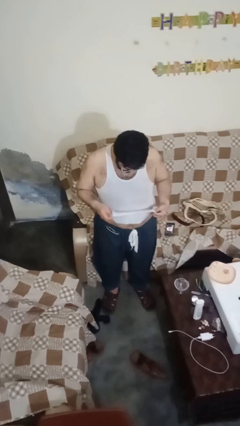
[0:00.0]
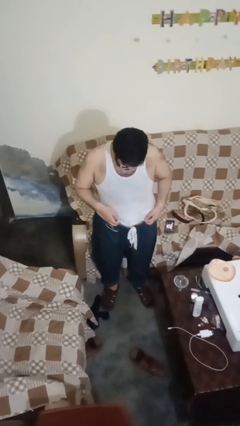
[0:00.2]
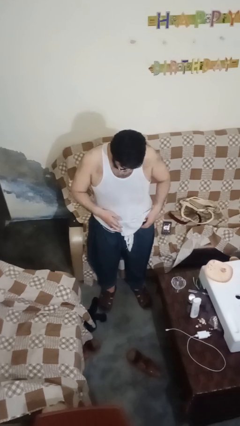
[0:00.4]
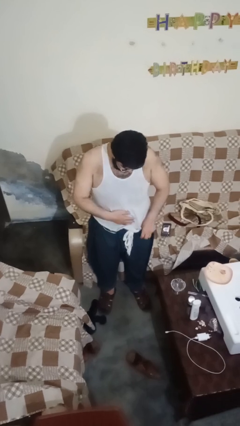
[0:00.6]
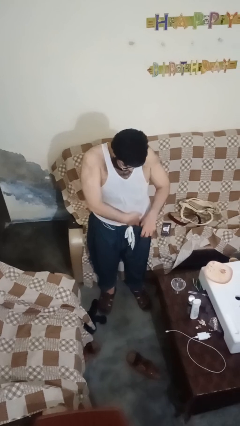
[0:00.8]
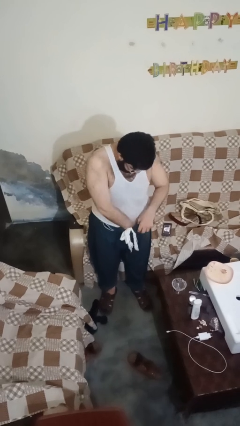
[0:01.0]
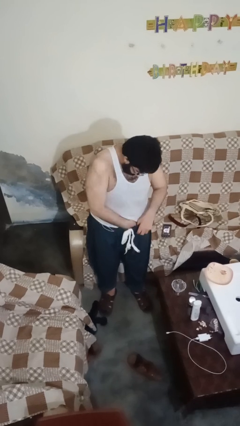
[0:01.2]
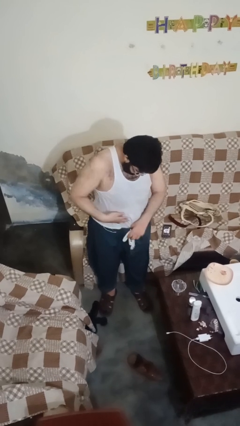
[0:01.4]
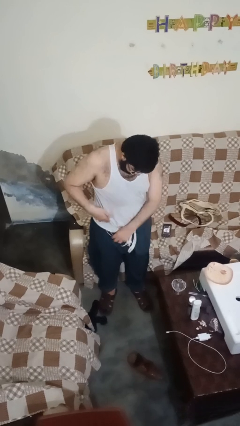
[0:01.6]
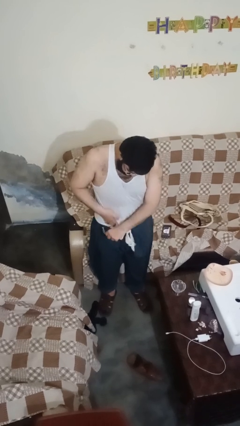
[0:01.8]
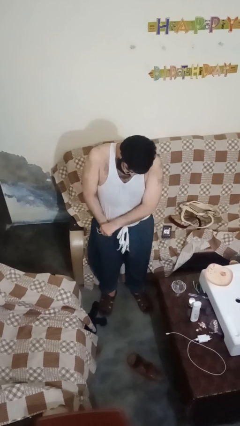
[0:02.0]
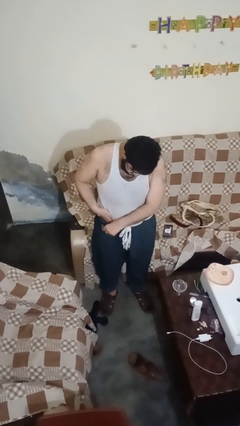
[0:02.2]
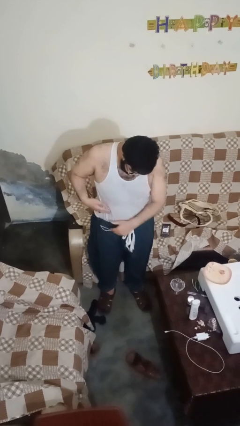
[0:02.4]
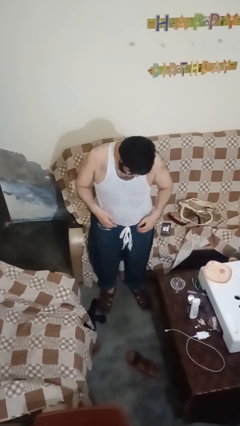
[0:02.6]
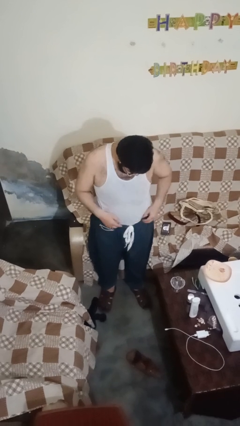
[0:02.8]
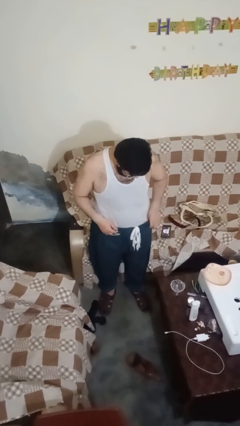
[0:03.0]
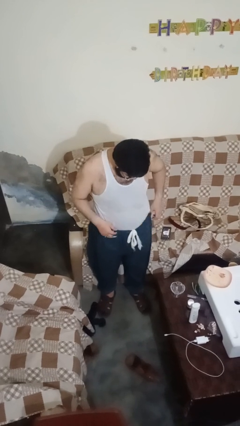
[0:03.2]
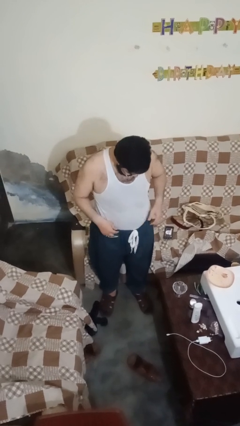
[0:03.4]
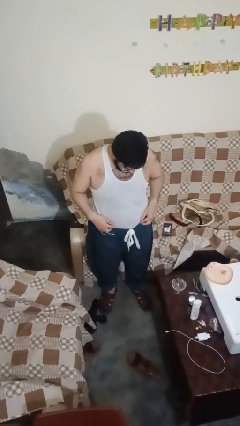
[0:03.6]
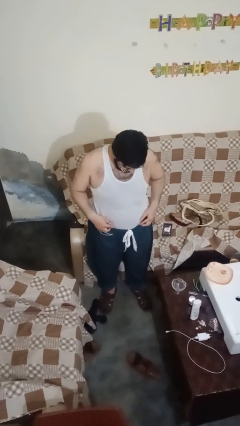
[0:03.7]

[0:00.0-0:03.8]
person tucks in shirt

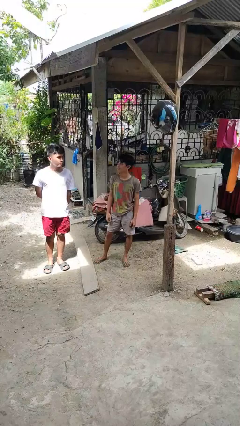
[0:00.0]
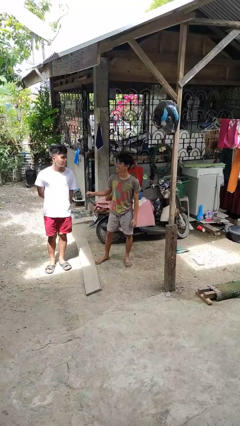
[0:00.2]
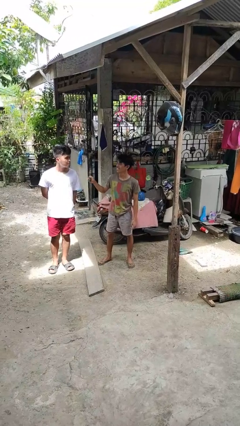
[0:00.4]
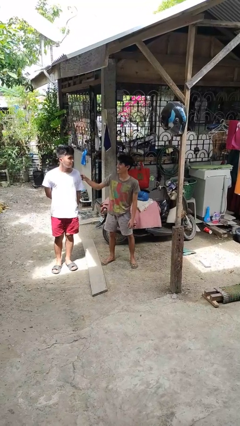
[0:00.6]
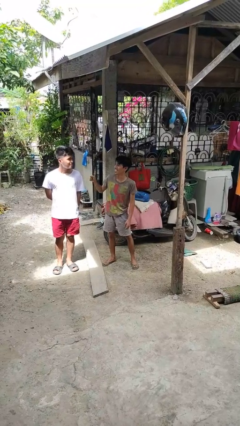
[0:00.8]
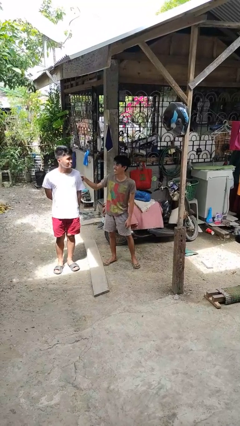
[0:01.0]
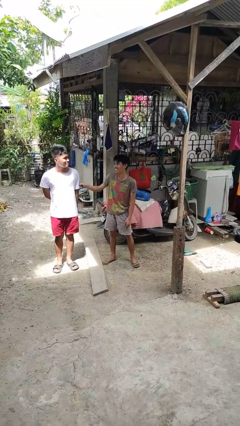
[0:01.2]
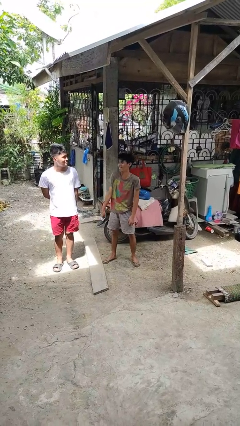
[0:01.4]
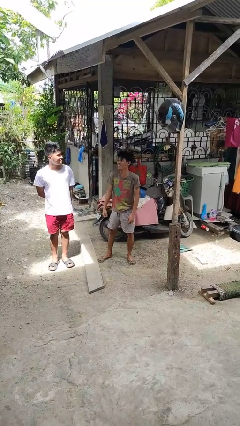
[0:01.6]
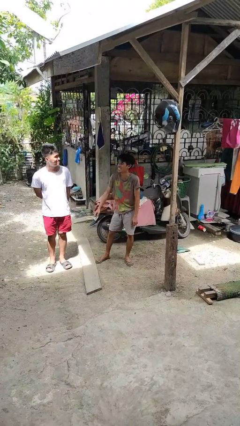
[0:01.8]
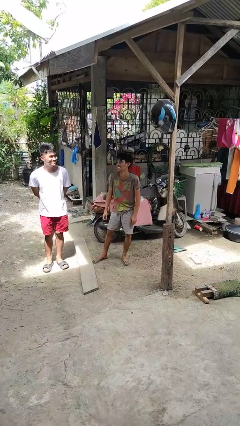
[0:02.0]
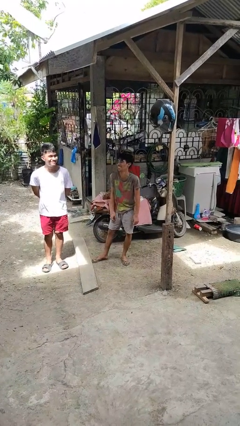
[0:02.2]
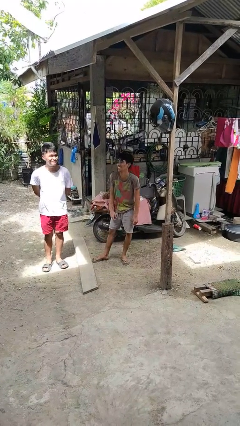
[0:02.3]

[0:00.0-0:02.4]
person pounds shoulders of person

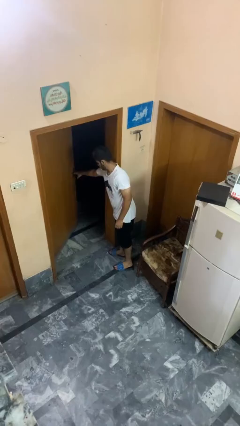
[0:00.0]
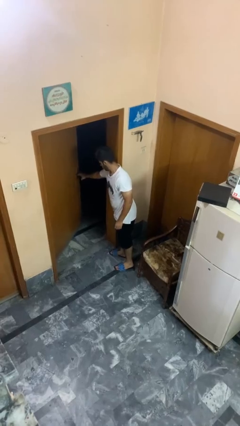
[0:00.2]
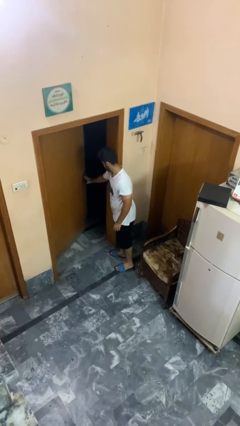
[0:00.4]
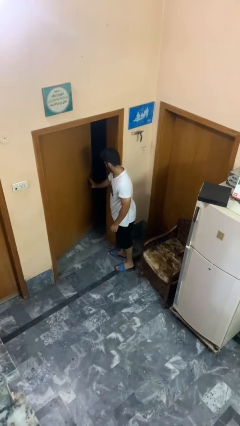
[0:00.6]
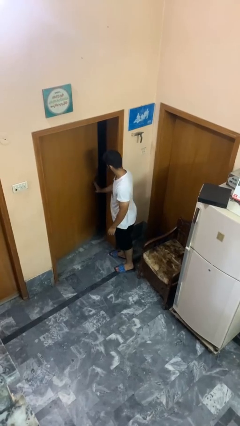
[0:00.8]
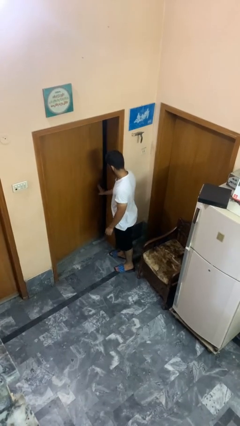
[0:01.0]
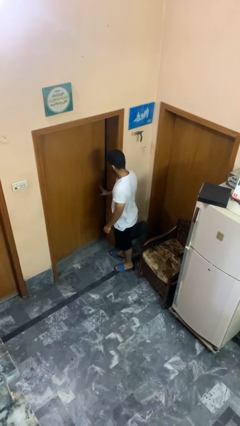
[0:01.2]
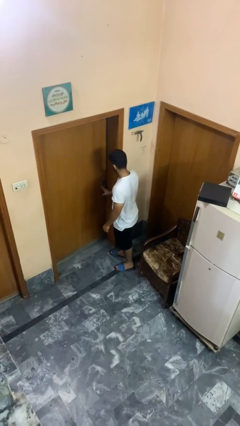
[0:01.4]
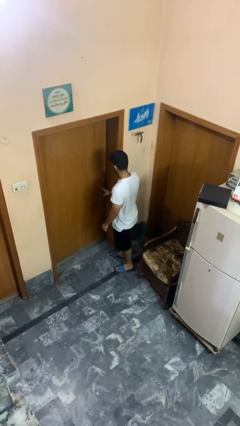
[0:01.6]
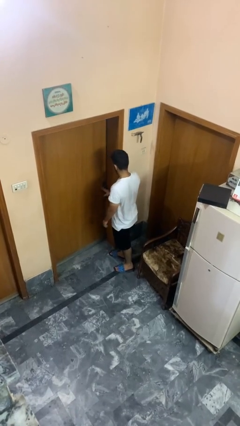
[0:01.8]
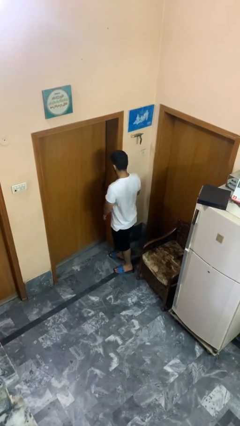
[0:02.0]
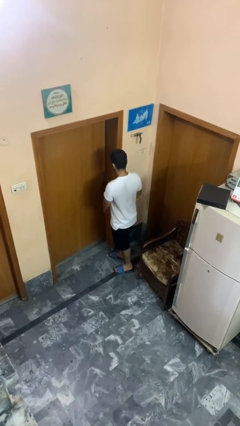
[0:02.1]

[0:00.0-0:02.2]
person closes facility door

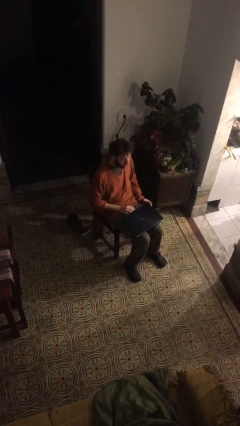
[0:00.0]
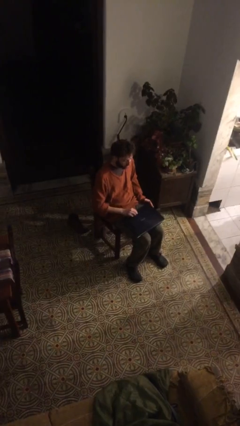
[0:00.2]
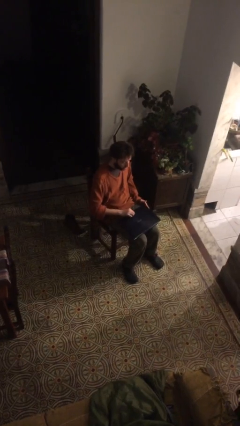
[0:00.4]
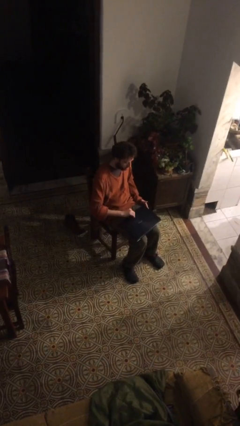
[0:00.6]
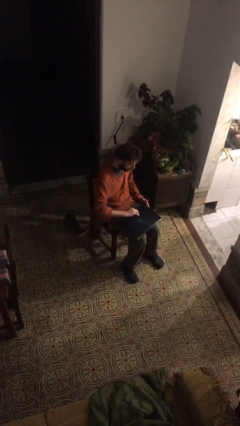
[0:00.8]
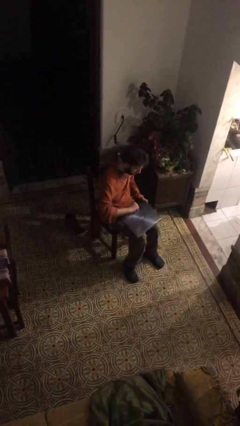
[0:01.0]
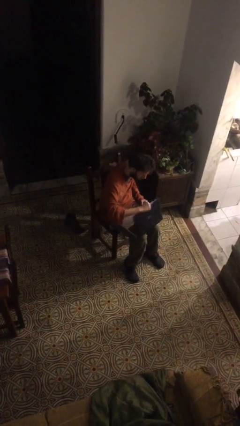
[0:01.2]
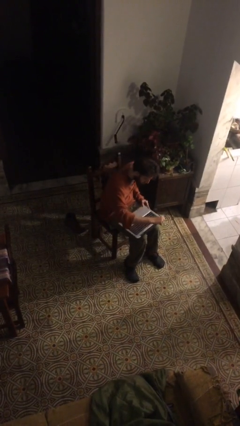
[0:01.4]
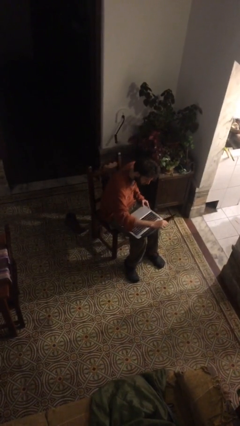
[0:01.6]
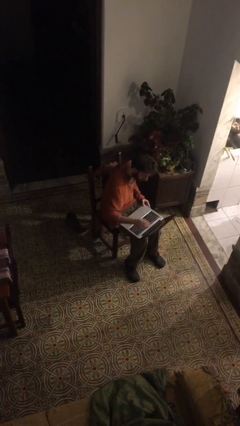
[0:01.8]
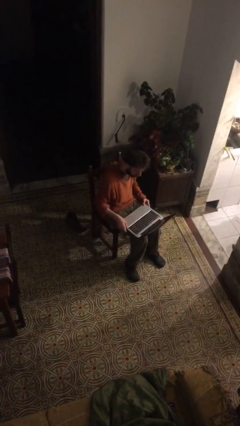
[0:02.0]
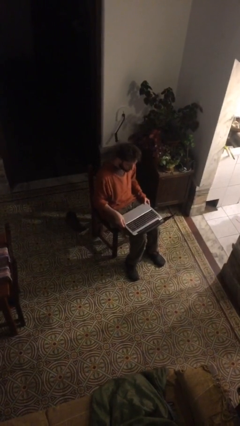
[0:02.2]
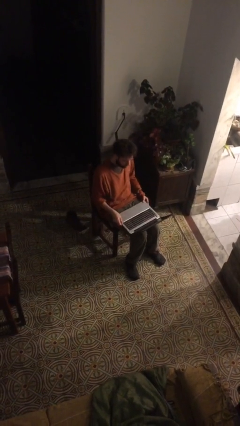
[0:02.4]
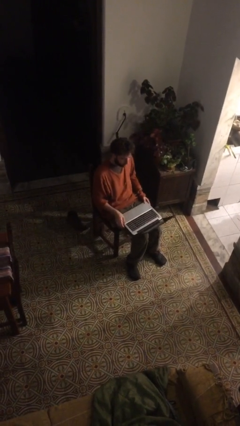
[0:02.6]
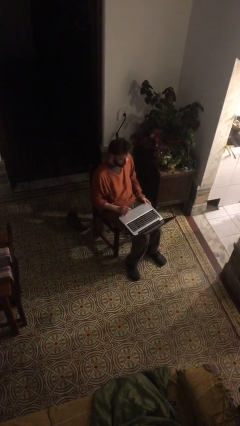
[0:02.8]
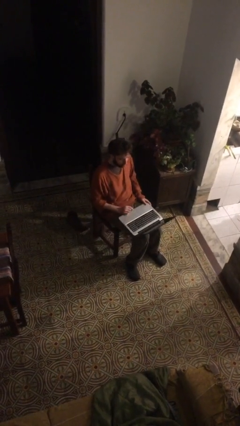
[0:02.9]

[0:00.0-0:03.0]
person opens laptop

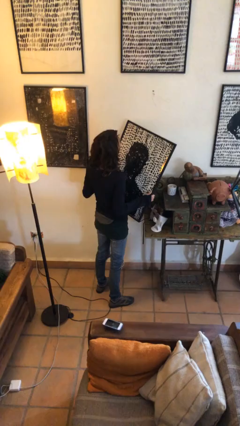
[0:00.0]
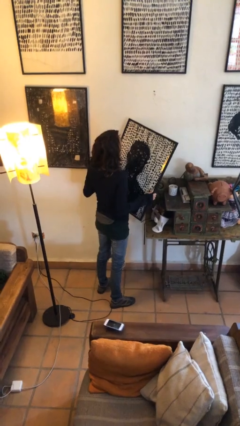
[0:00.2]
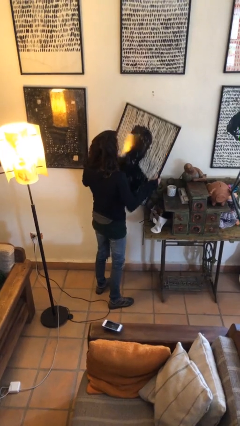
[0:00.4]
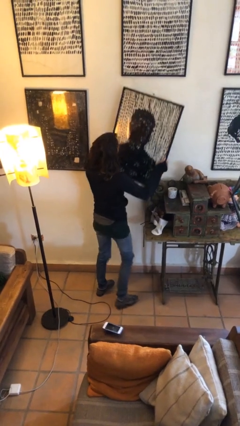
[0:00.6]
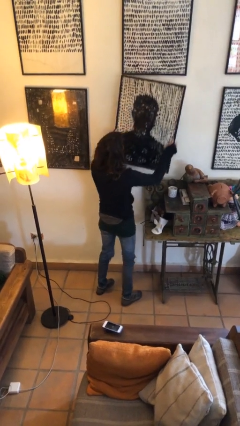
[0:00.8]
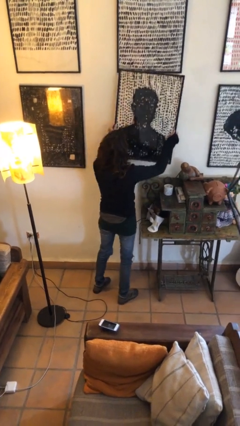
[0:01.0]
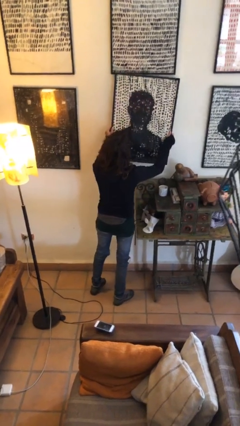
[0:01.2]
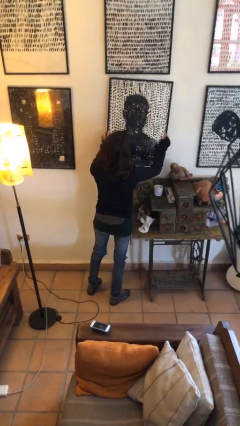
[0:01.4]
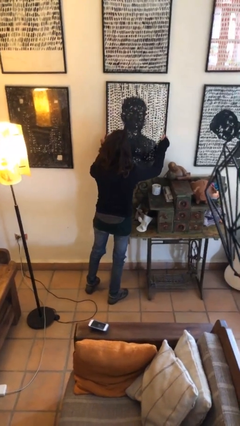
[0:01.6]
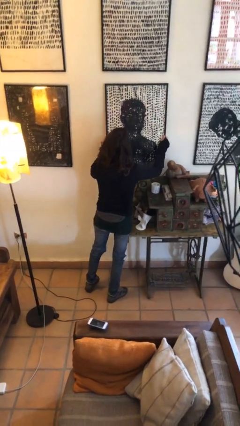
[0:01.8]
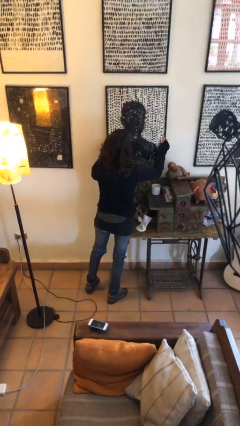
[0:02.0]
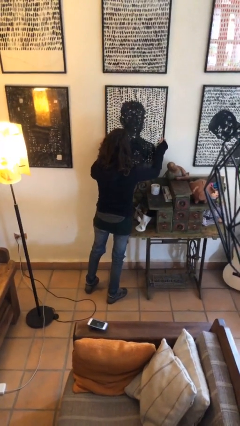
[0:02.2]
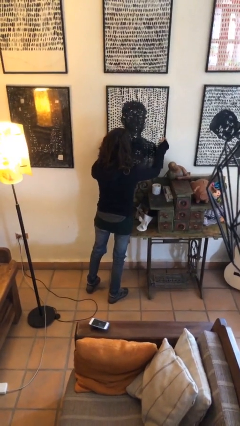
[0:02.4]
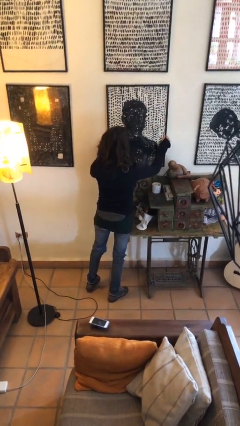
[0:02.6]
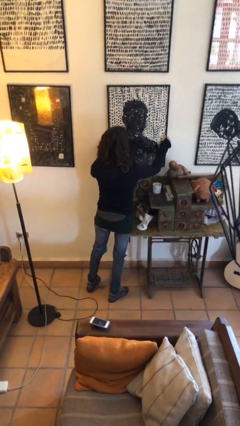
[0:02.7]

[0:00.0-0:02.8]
person puts up picture frame

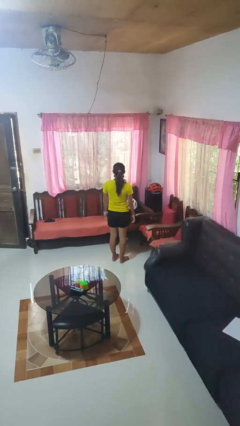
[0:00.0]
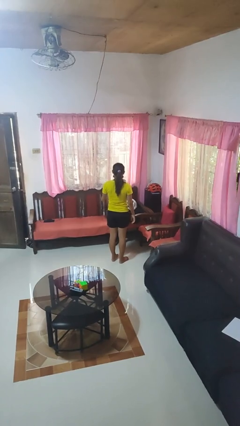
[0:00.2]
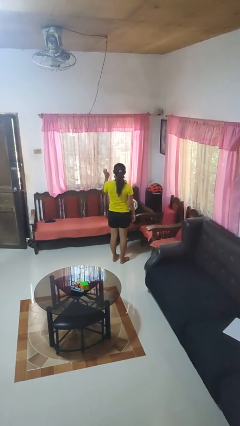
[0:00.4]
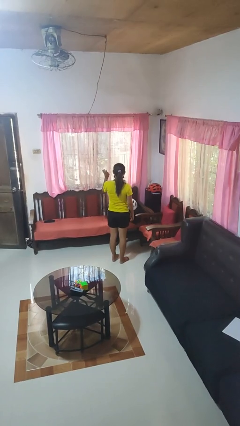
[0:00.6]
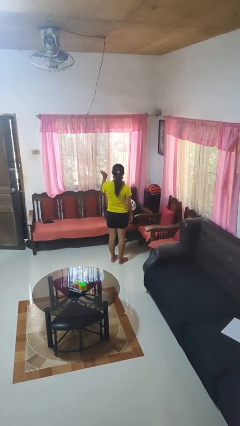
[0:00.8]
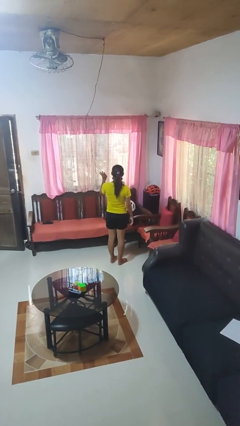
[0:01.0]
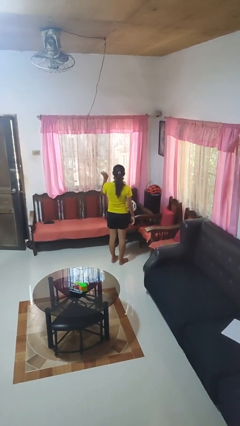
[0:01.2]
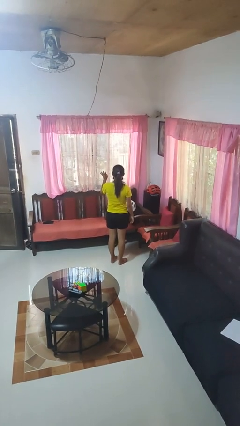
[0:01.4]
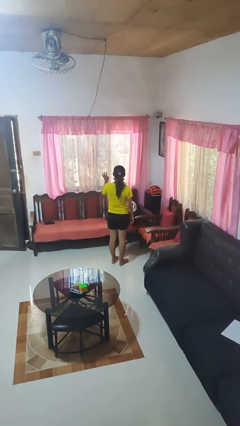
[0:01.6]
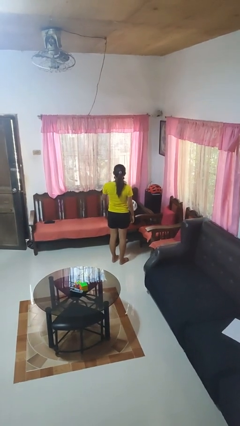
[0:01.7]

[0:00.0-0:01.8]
person gestures number four

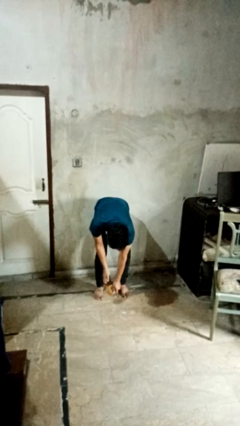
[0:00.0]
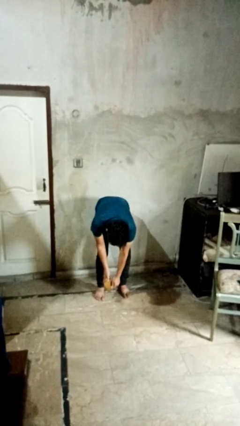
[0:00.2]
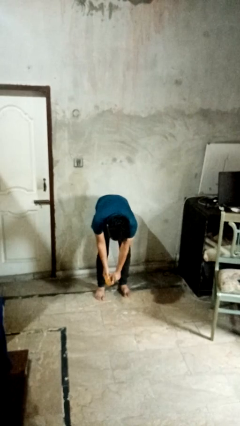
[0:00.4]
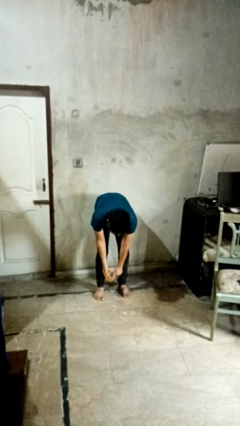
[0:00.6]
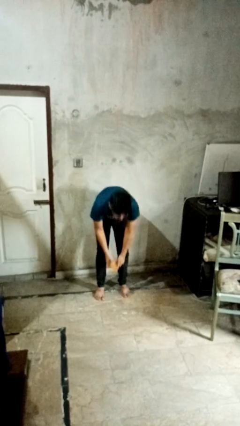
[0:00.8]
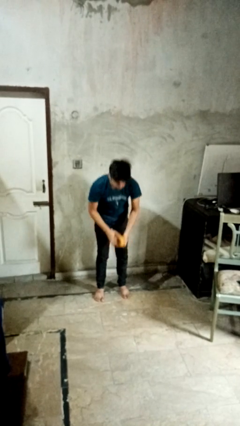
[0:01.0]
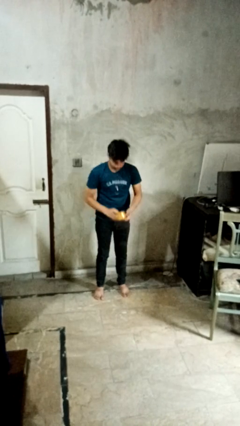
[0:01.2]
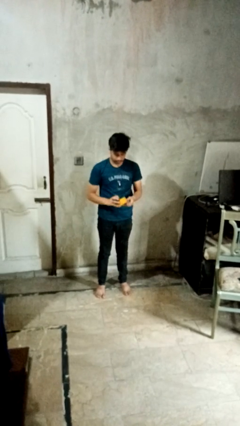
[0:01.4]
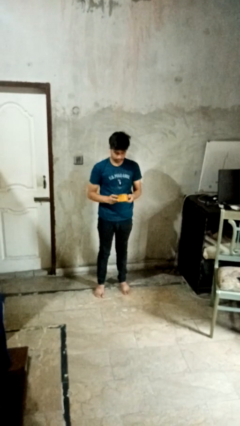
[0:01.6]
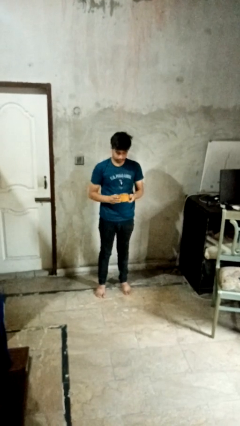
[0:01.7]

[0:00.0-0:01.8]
person picks up object from floor
